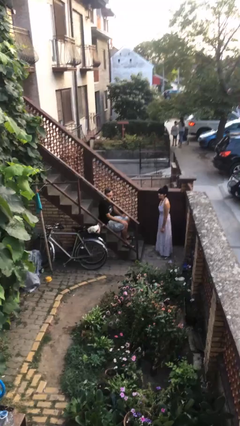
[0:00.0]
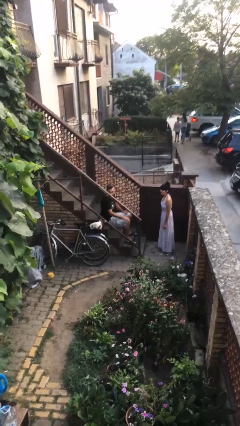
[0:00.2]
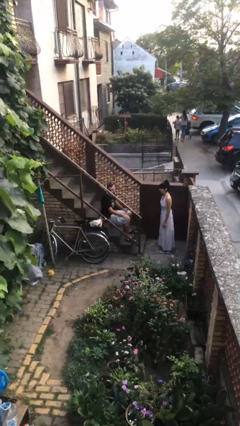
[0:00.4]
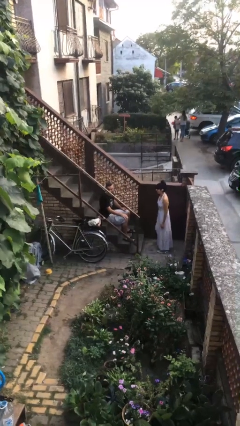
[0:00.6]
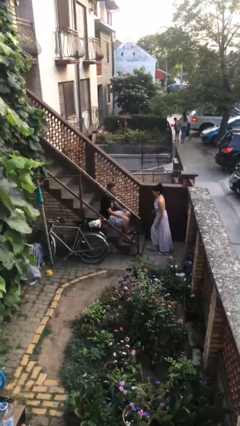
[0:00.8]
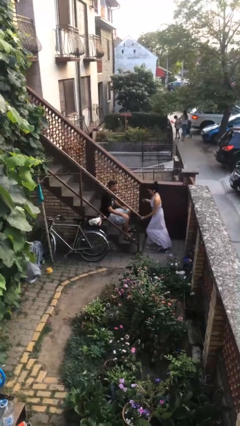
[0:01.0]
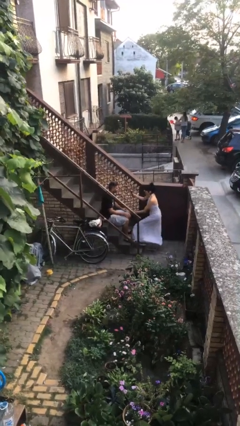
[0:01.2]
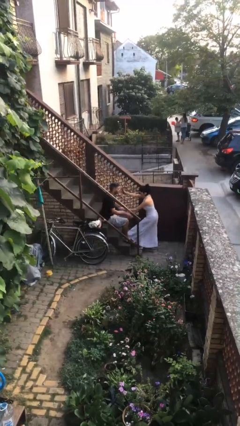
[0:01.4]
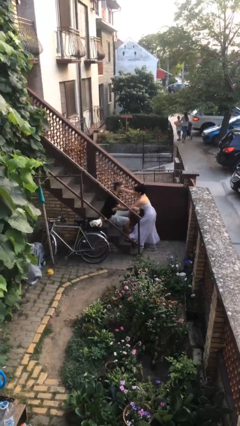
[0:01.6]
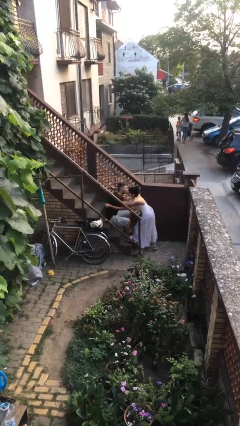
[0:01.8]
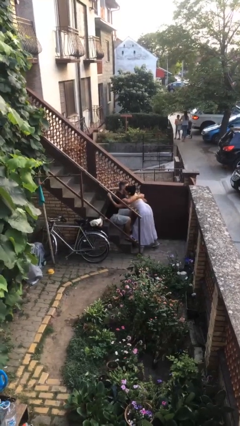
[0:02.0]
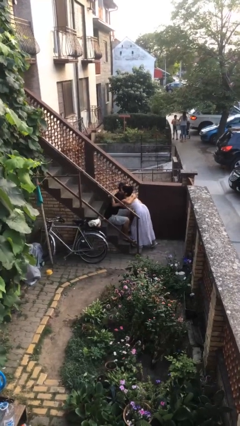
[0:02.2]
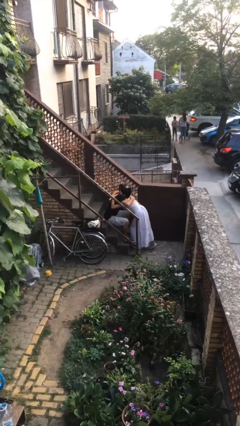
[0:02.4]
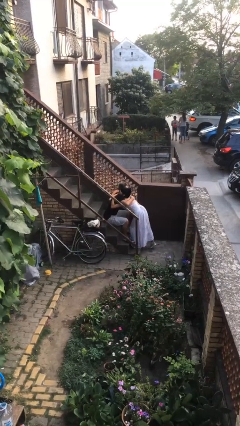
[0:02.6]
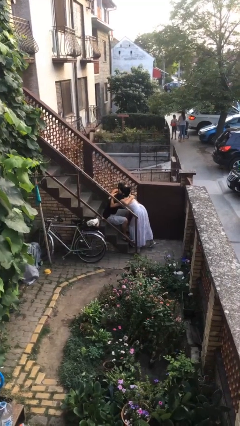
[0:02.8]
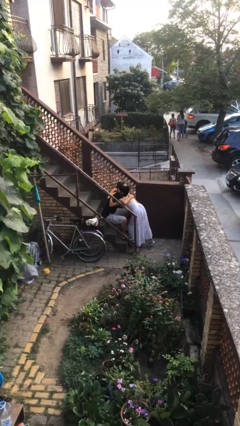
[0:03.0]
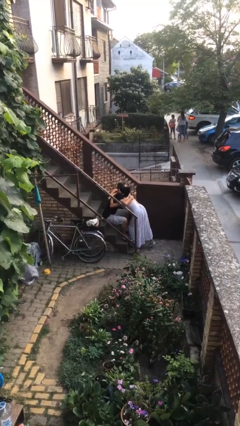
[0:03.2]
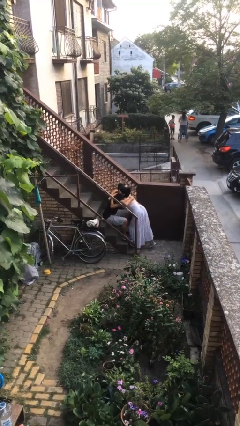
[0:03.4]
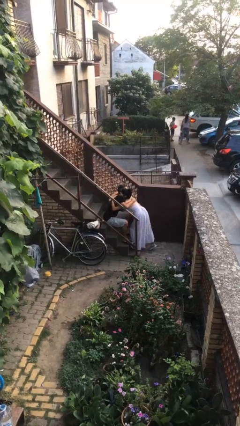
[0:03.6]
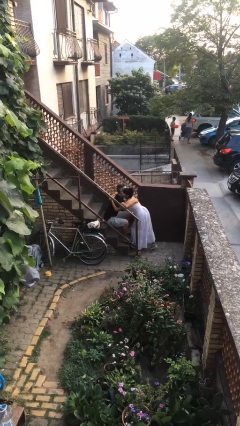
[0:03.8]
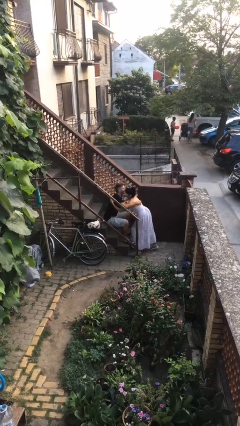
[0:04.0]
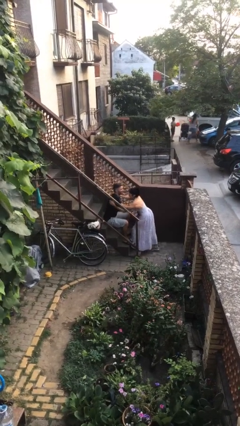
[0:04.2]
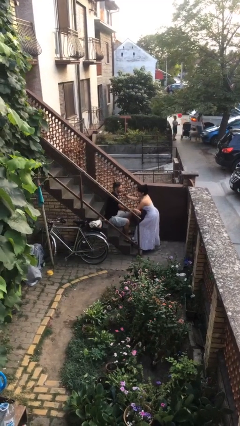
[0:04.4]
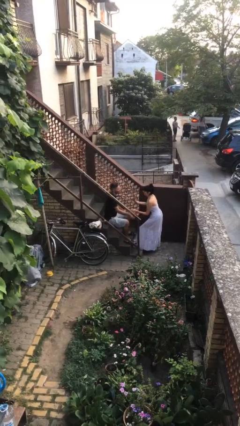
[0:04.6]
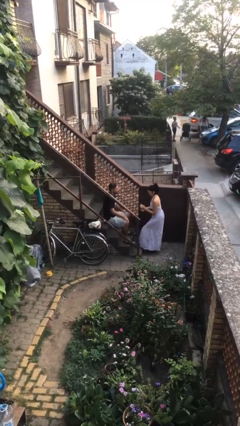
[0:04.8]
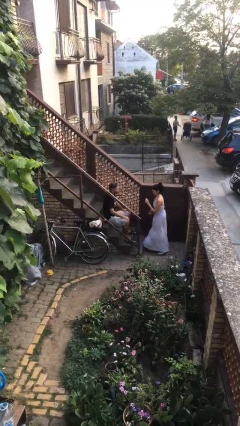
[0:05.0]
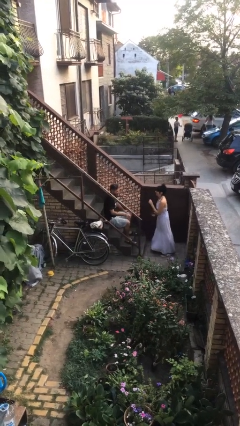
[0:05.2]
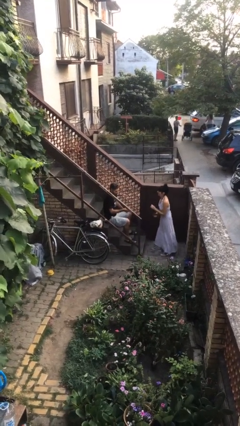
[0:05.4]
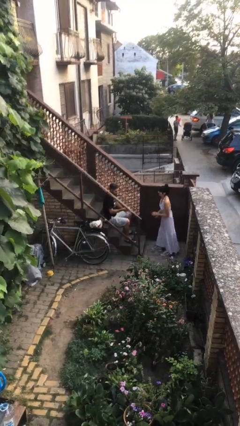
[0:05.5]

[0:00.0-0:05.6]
person embraces person

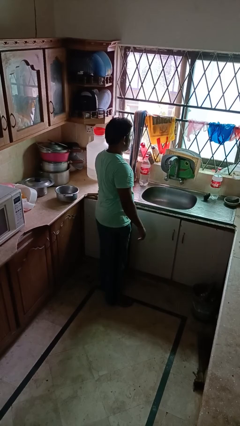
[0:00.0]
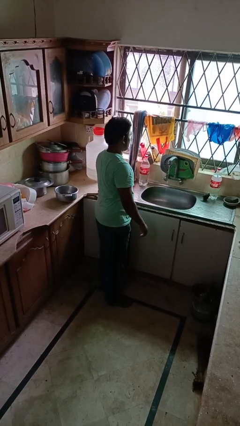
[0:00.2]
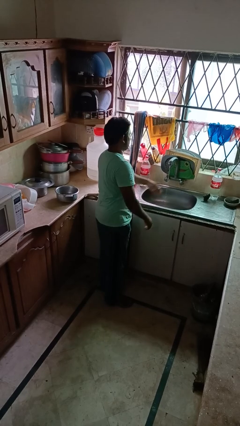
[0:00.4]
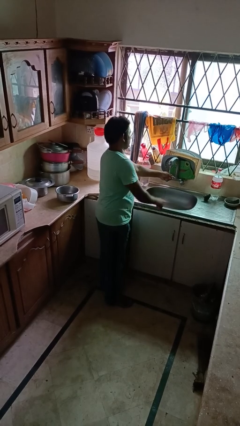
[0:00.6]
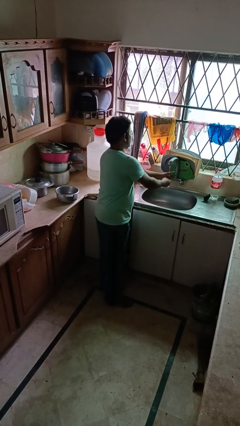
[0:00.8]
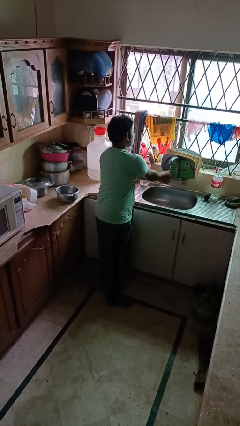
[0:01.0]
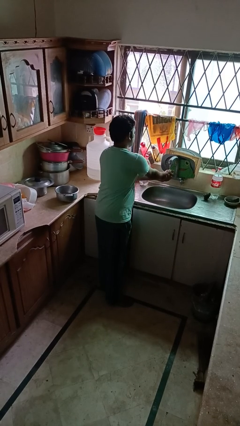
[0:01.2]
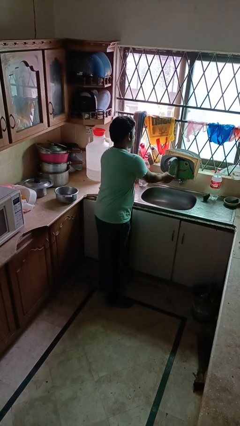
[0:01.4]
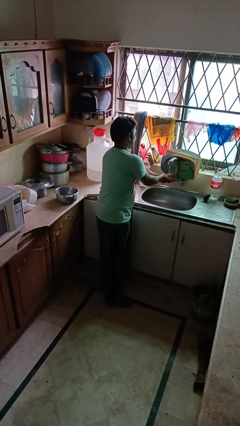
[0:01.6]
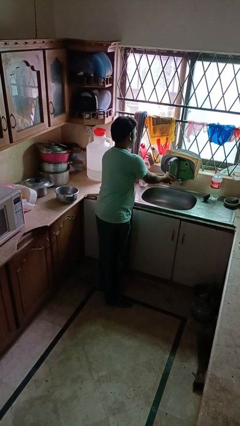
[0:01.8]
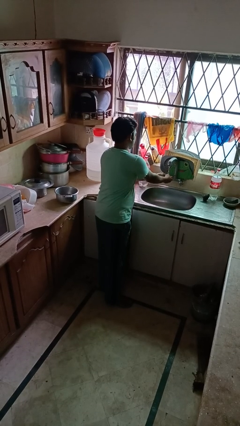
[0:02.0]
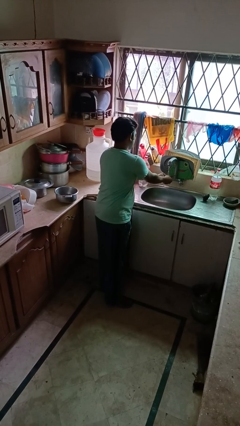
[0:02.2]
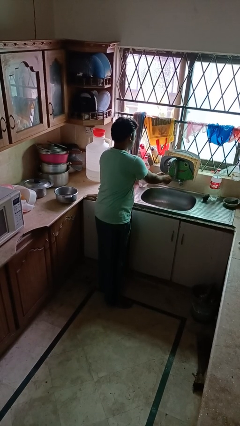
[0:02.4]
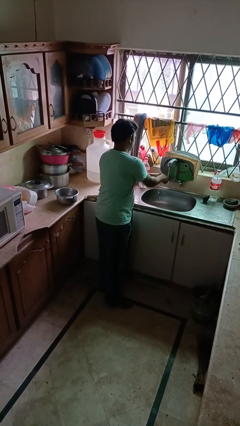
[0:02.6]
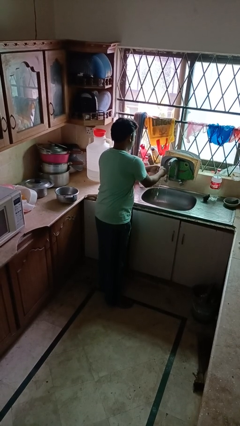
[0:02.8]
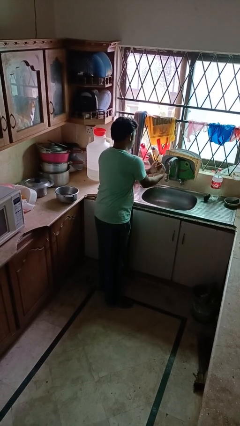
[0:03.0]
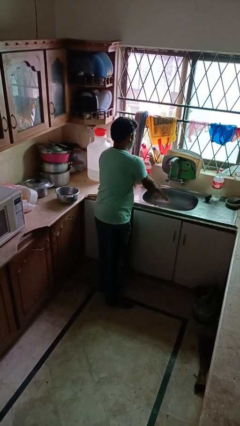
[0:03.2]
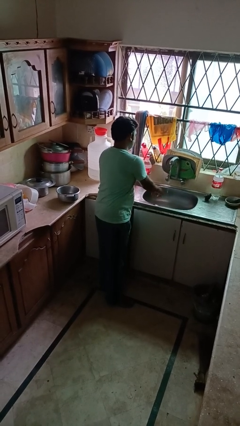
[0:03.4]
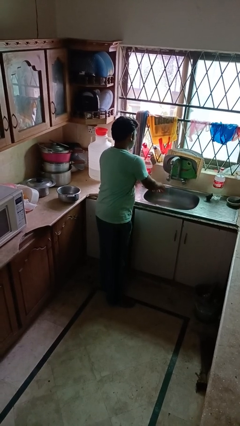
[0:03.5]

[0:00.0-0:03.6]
person washes hands

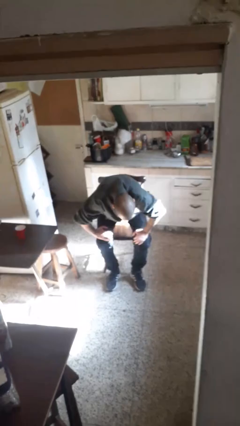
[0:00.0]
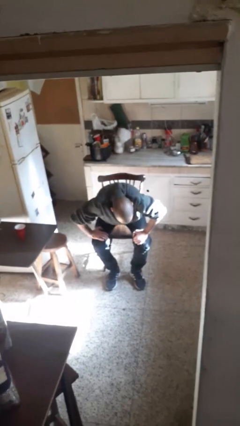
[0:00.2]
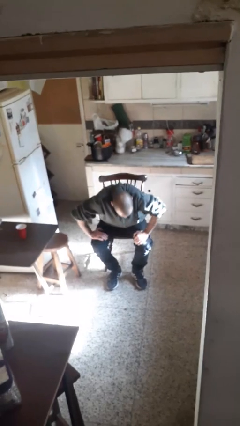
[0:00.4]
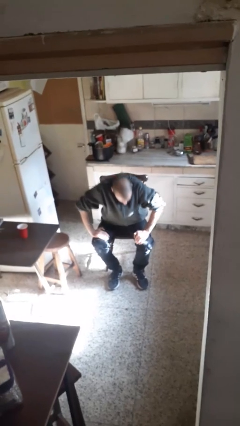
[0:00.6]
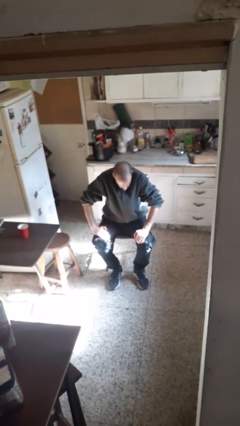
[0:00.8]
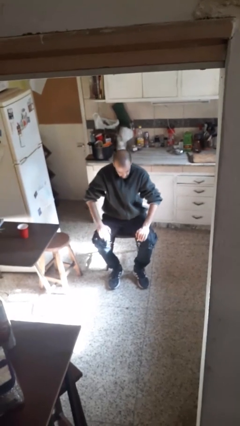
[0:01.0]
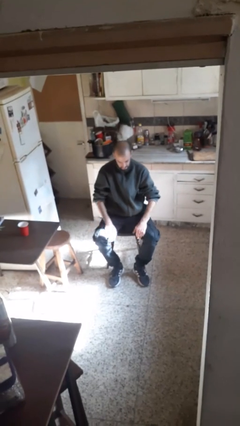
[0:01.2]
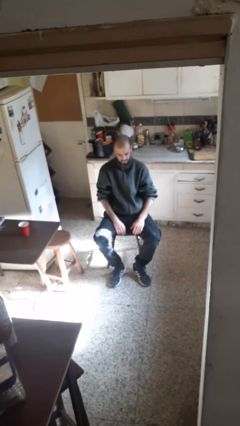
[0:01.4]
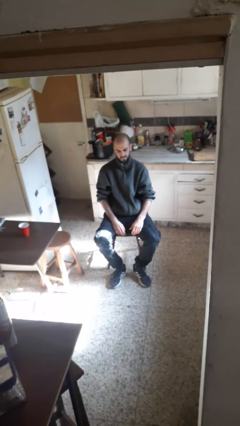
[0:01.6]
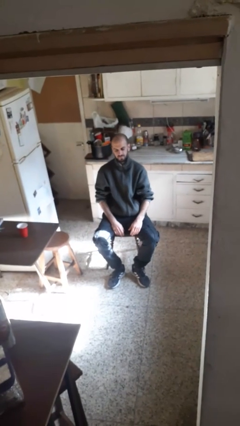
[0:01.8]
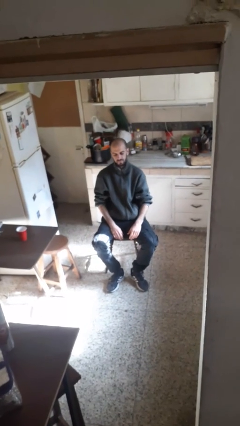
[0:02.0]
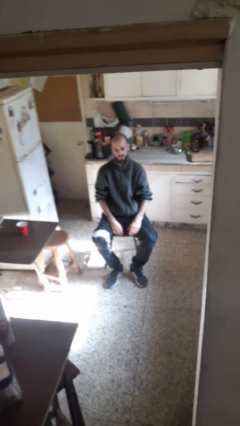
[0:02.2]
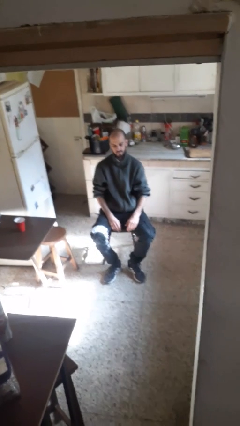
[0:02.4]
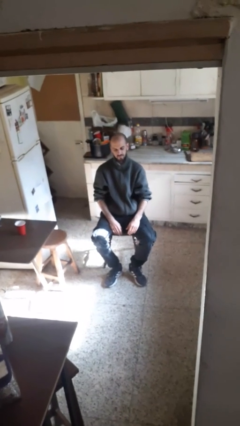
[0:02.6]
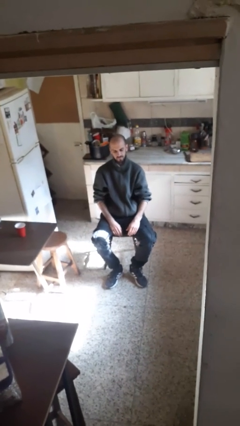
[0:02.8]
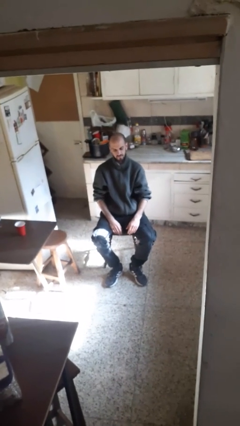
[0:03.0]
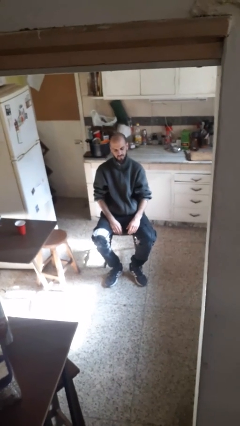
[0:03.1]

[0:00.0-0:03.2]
person sits down

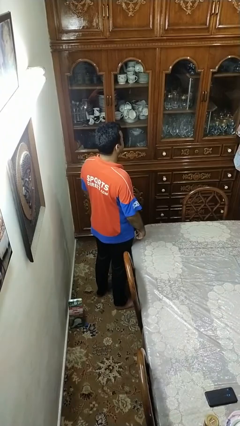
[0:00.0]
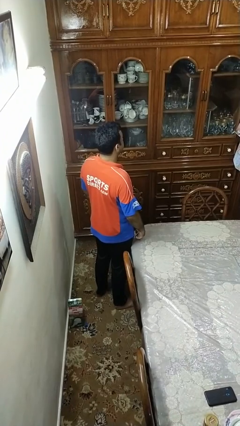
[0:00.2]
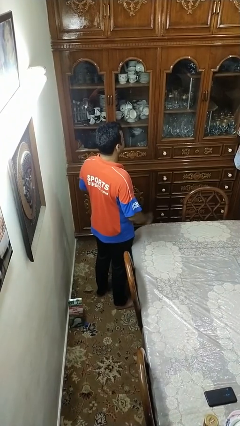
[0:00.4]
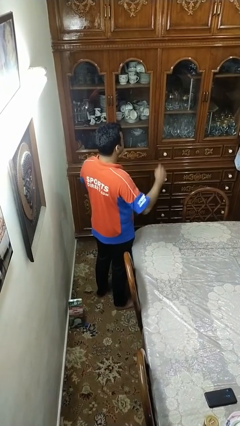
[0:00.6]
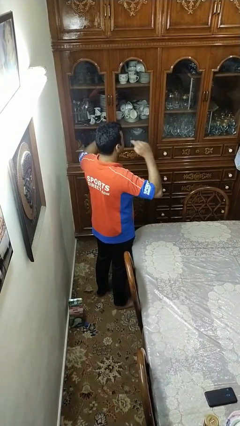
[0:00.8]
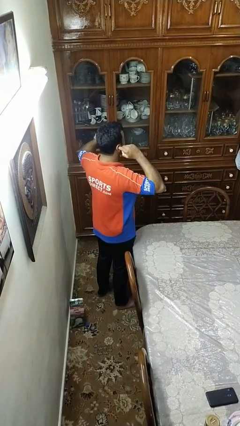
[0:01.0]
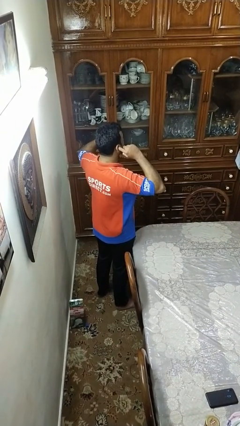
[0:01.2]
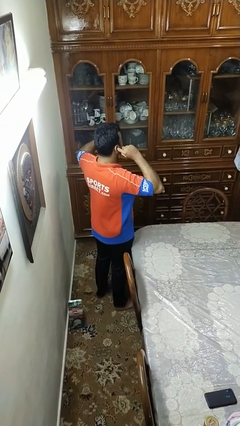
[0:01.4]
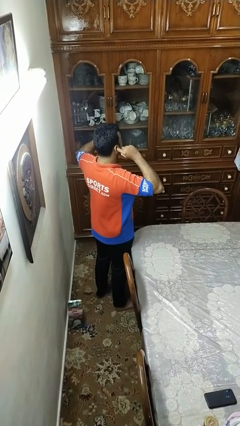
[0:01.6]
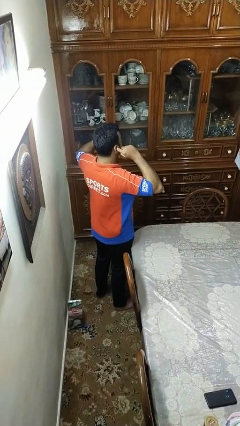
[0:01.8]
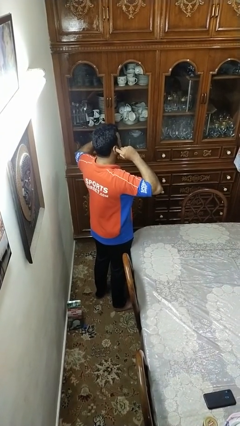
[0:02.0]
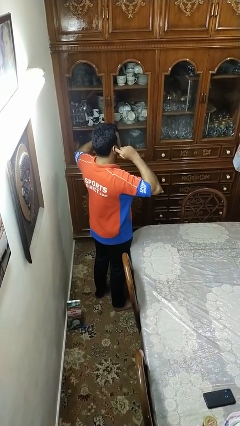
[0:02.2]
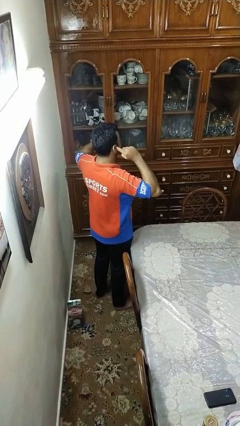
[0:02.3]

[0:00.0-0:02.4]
person puts fingers in ear

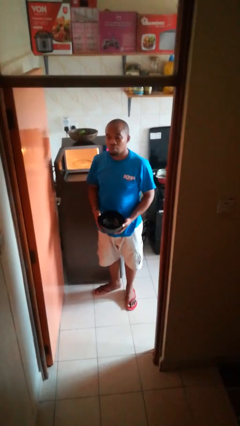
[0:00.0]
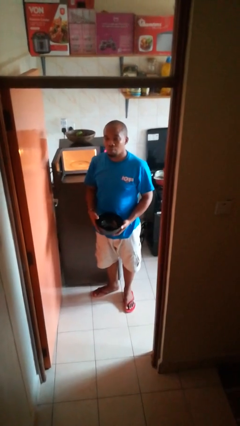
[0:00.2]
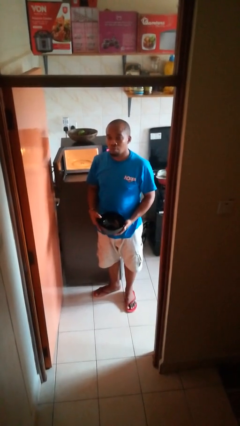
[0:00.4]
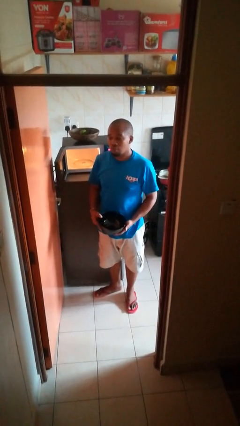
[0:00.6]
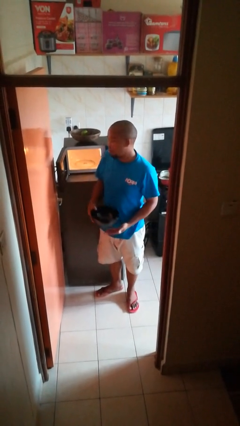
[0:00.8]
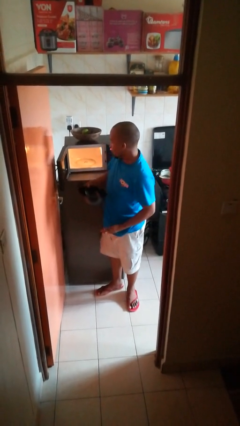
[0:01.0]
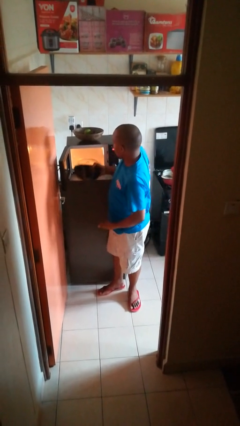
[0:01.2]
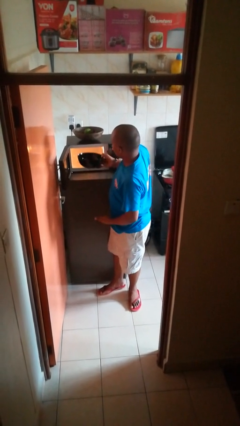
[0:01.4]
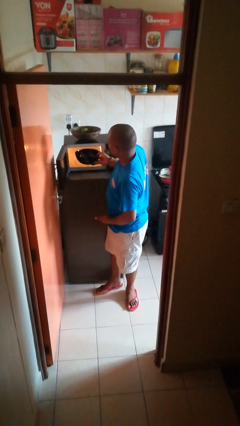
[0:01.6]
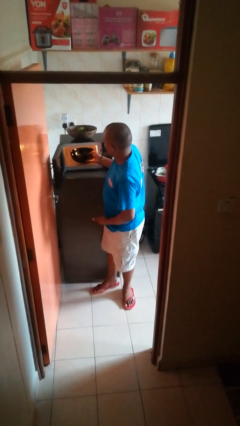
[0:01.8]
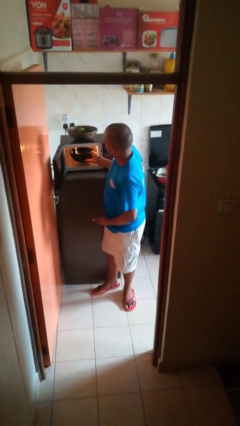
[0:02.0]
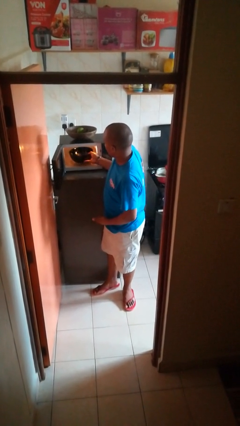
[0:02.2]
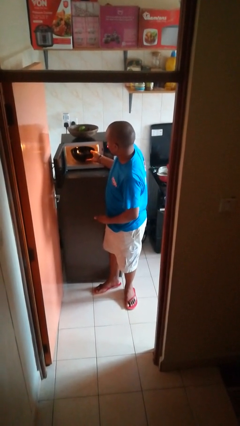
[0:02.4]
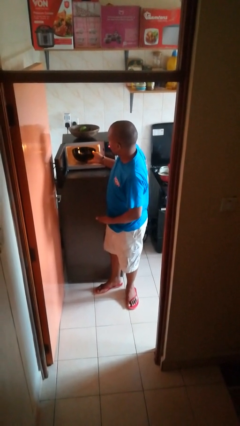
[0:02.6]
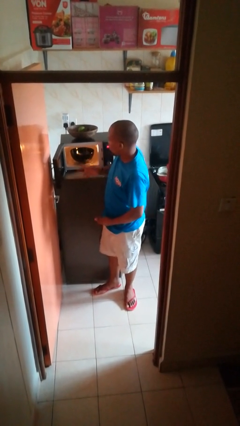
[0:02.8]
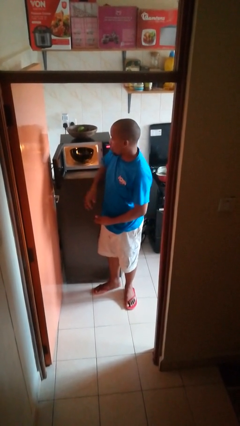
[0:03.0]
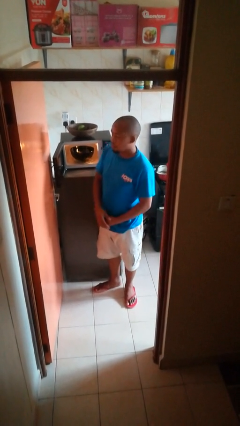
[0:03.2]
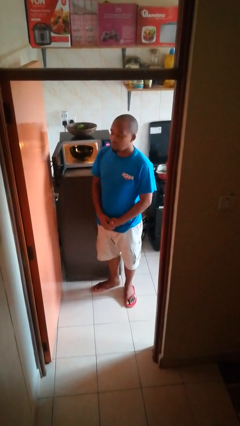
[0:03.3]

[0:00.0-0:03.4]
person puts object into microwave
